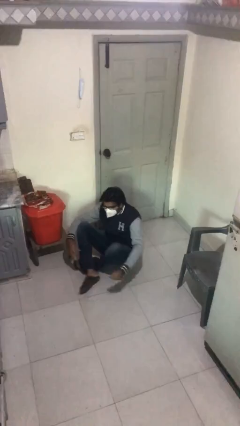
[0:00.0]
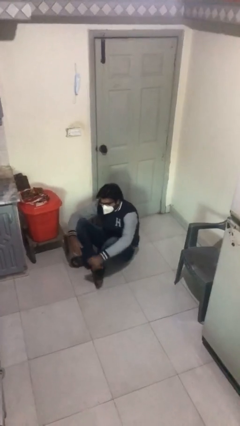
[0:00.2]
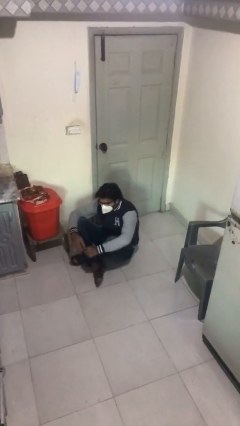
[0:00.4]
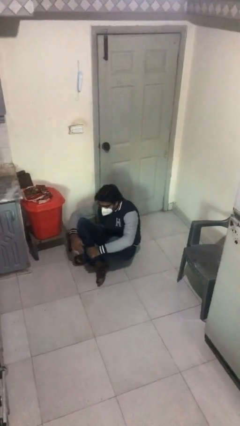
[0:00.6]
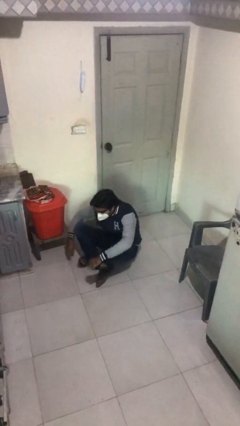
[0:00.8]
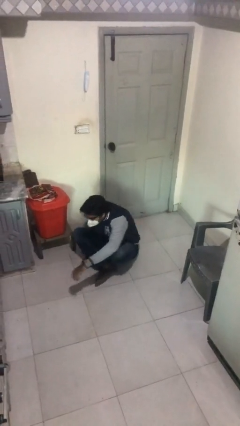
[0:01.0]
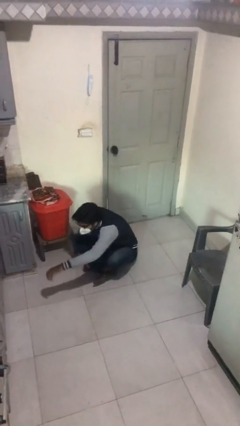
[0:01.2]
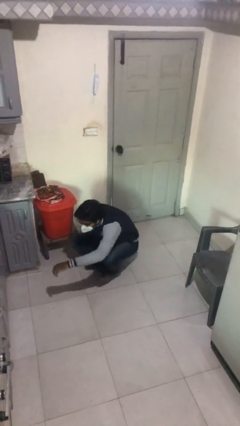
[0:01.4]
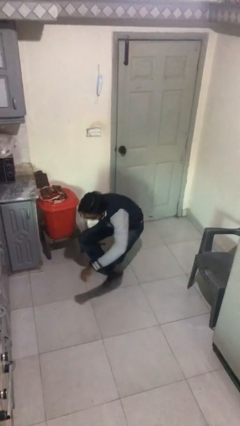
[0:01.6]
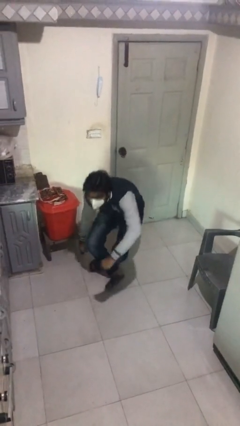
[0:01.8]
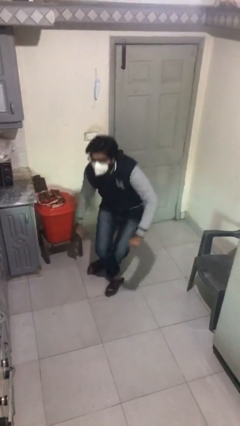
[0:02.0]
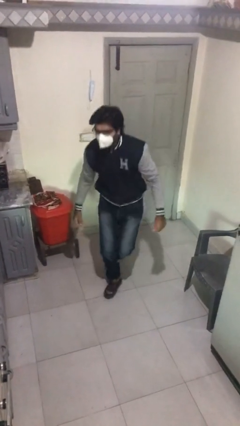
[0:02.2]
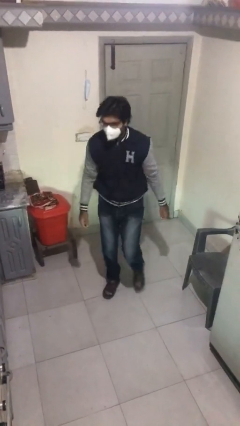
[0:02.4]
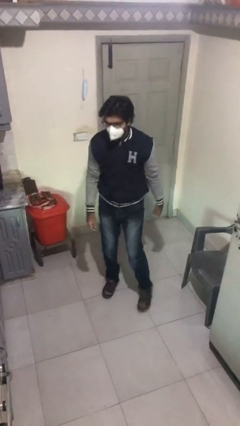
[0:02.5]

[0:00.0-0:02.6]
person stands up

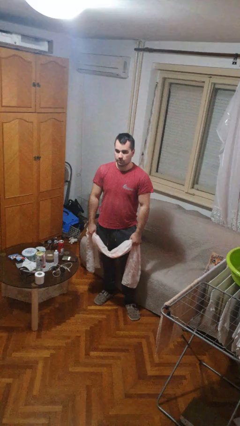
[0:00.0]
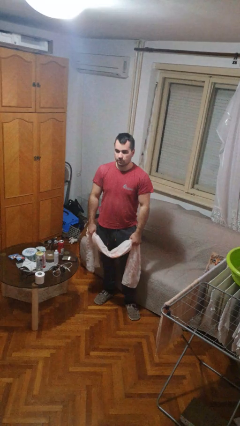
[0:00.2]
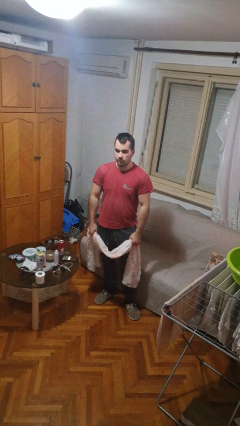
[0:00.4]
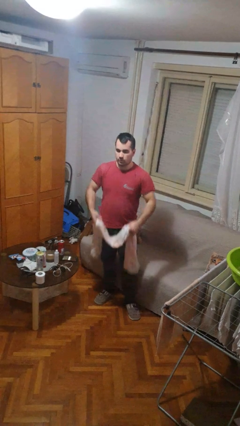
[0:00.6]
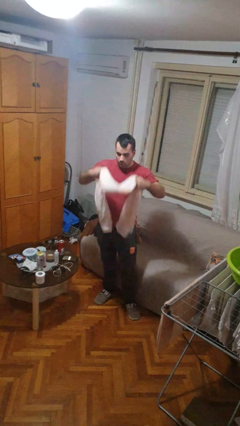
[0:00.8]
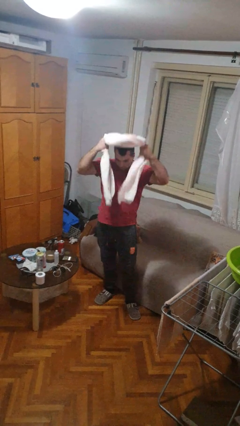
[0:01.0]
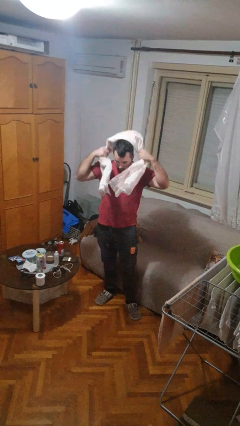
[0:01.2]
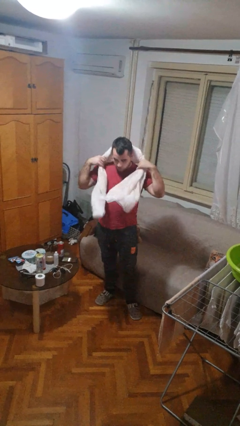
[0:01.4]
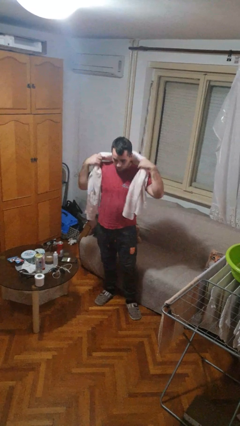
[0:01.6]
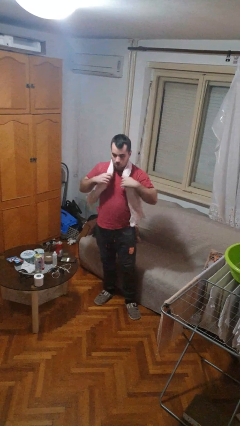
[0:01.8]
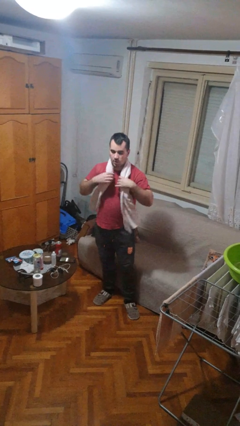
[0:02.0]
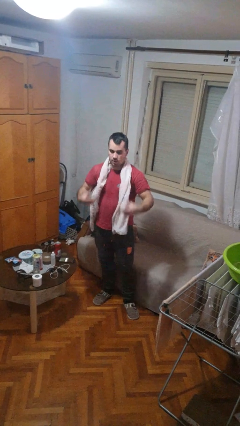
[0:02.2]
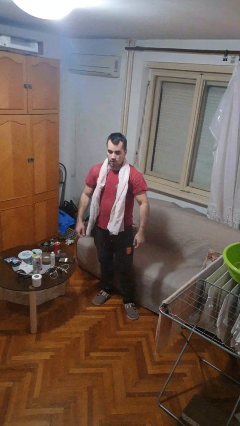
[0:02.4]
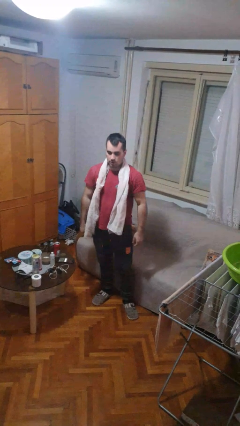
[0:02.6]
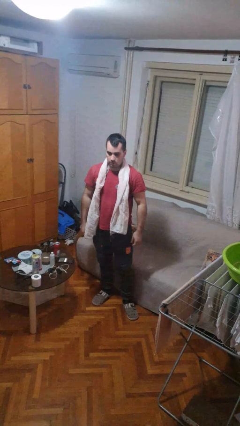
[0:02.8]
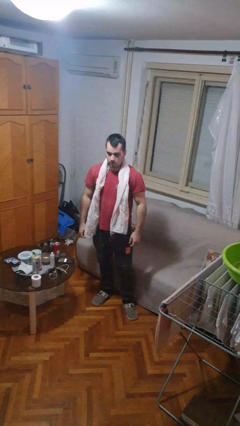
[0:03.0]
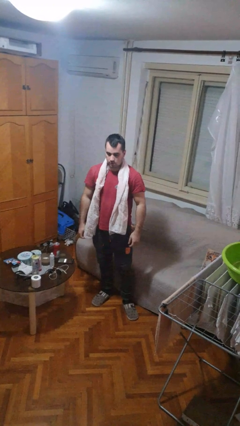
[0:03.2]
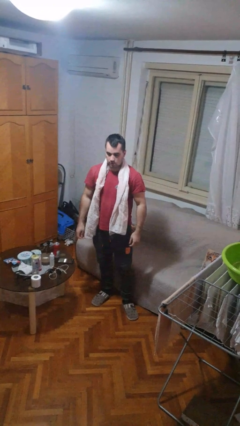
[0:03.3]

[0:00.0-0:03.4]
person puts on scarf

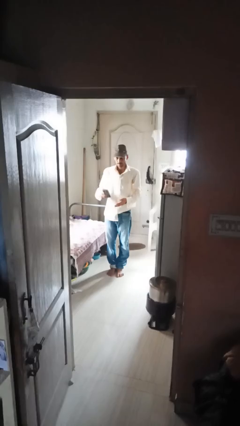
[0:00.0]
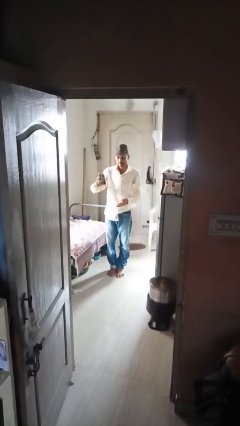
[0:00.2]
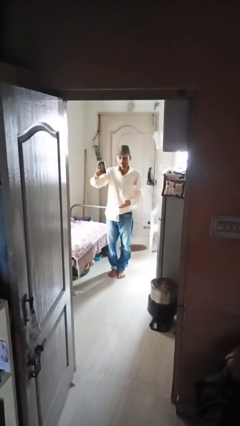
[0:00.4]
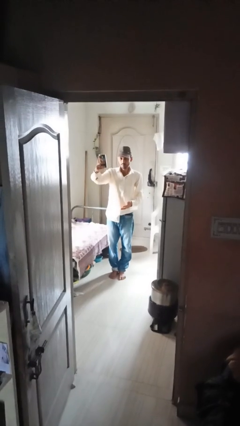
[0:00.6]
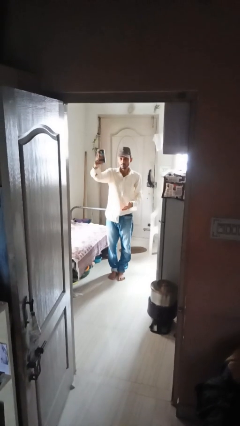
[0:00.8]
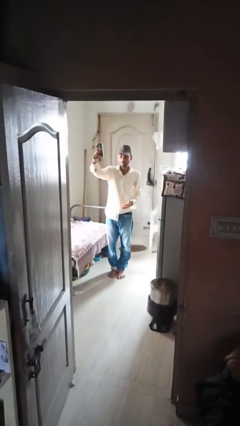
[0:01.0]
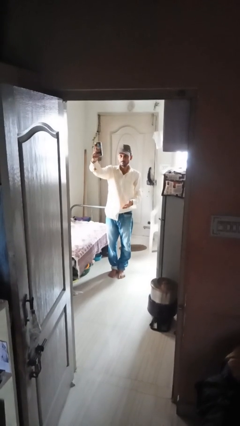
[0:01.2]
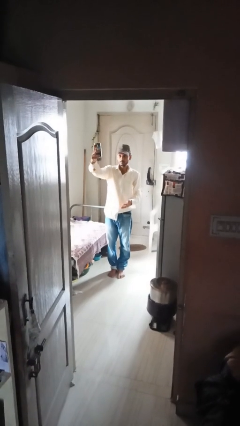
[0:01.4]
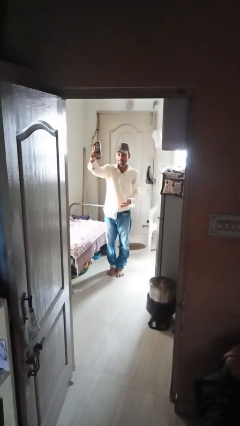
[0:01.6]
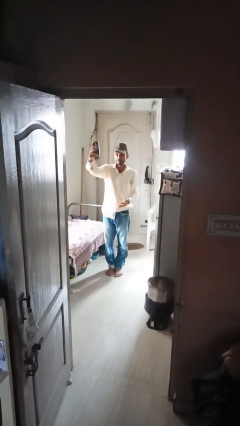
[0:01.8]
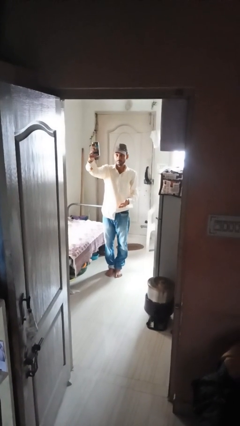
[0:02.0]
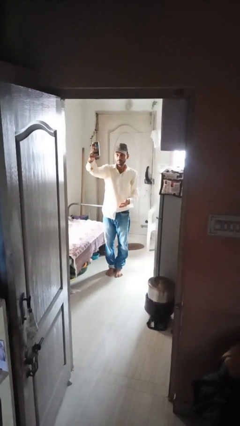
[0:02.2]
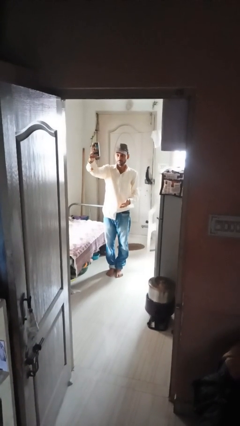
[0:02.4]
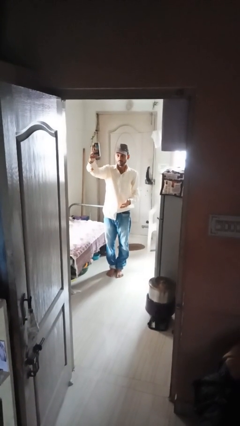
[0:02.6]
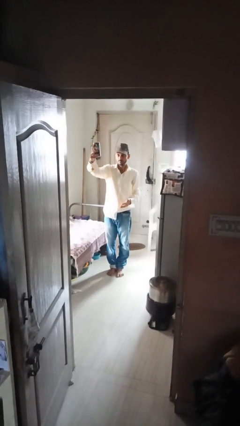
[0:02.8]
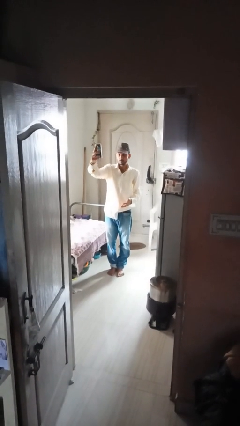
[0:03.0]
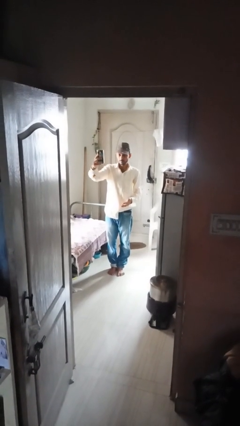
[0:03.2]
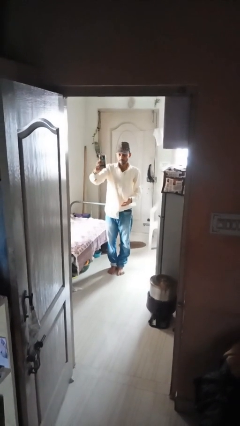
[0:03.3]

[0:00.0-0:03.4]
person takes selfie

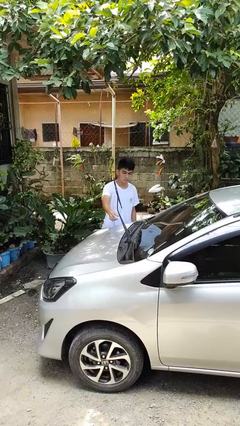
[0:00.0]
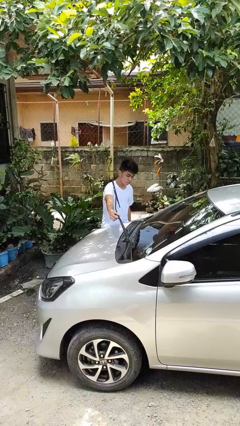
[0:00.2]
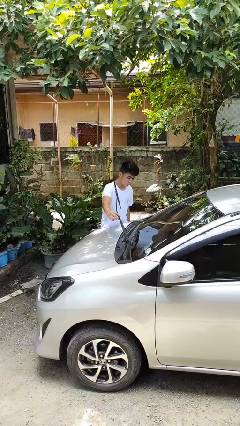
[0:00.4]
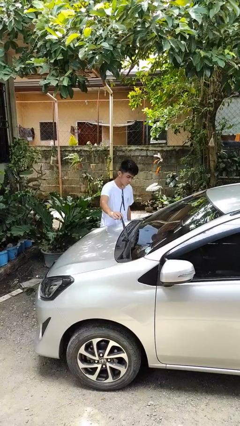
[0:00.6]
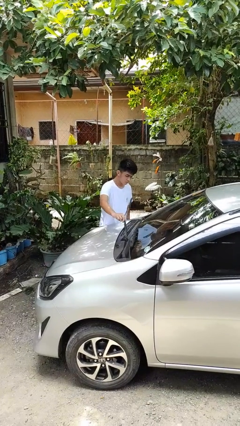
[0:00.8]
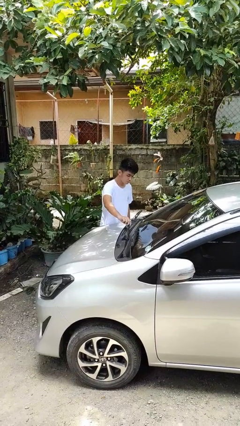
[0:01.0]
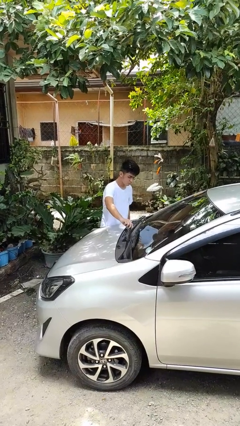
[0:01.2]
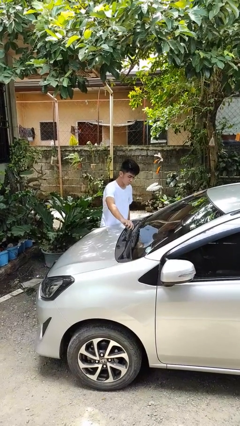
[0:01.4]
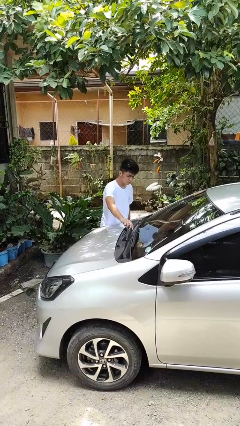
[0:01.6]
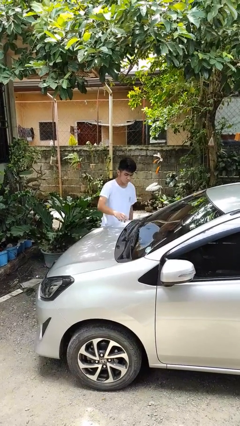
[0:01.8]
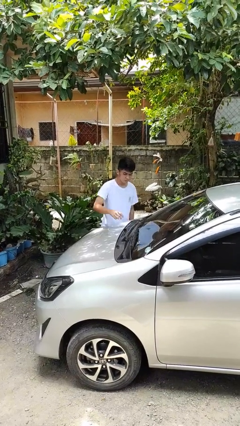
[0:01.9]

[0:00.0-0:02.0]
person flips down car wipers

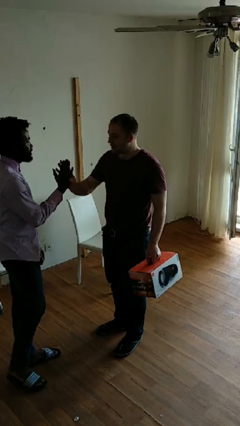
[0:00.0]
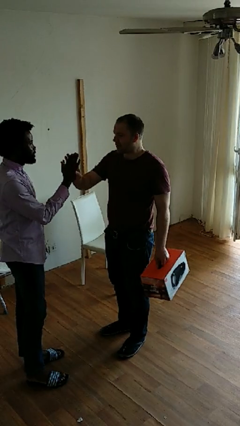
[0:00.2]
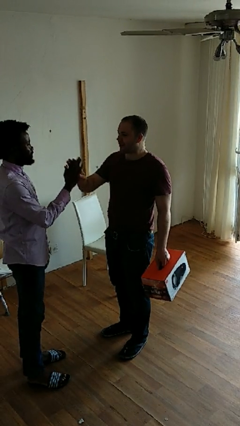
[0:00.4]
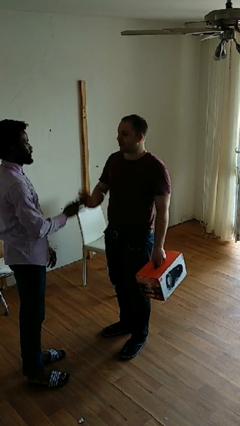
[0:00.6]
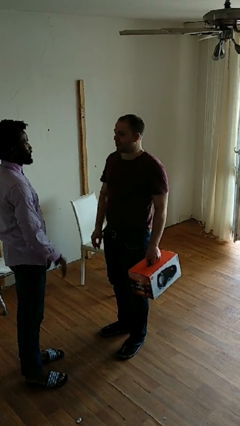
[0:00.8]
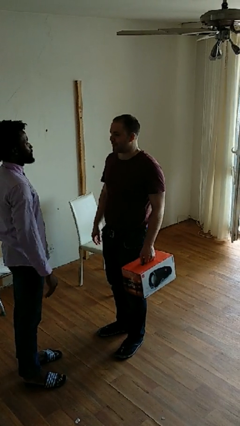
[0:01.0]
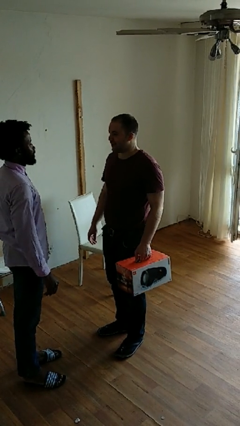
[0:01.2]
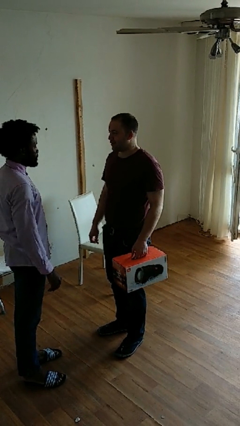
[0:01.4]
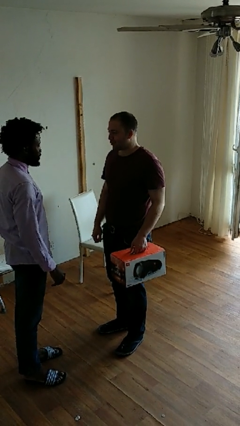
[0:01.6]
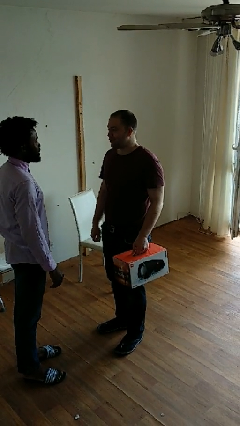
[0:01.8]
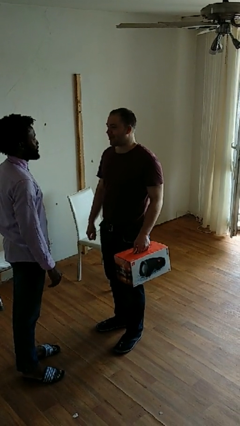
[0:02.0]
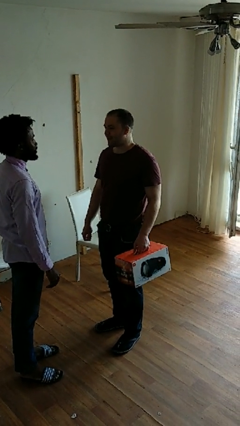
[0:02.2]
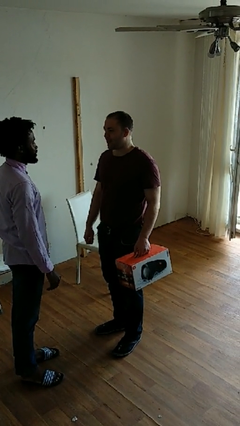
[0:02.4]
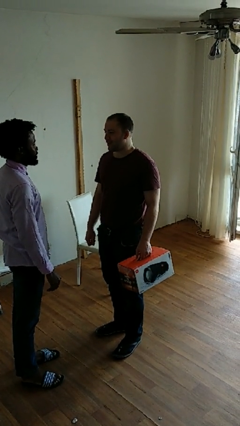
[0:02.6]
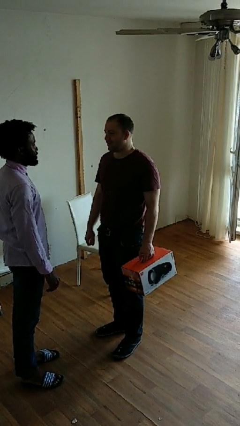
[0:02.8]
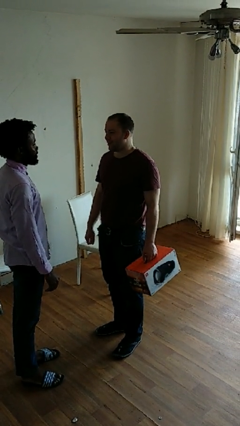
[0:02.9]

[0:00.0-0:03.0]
person highfives hand

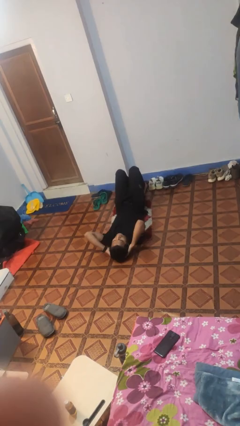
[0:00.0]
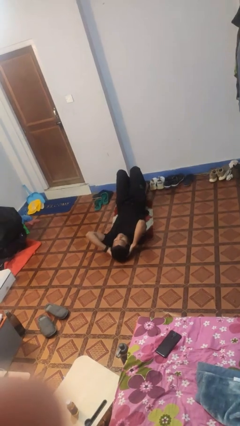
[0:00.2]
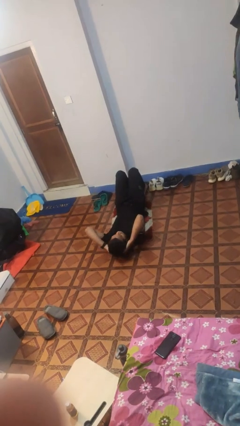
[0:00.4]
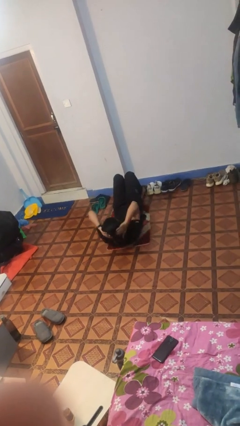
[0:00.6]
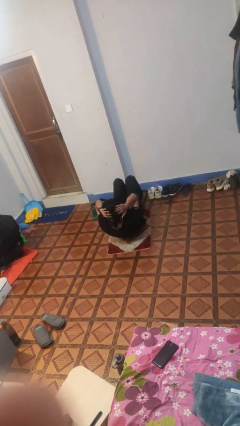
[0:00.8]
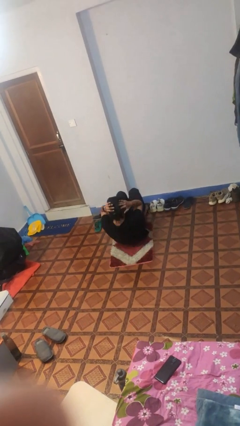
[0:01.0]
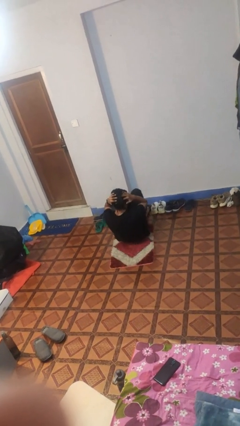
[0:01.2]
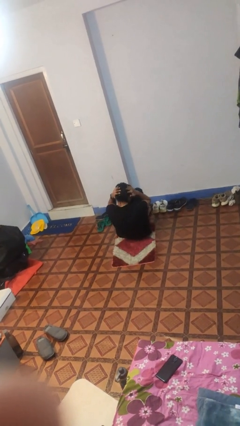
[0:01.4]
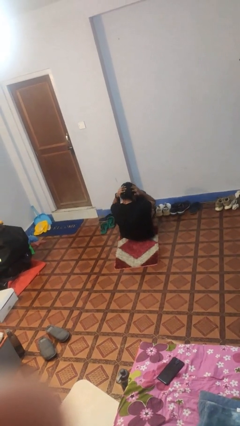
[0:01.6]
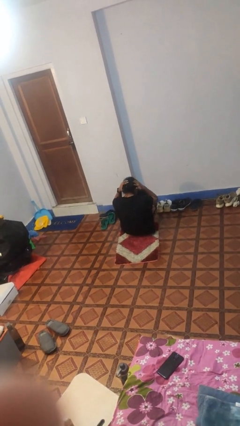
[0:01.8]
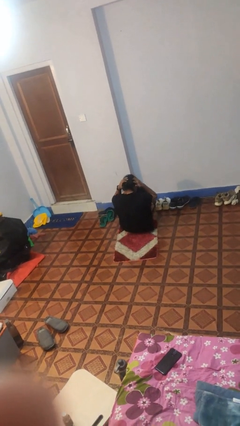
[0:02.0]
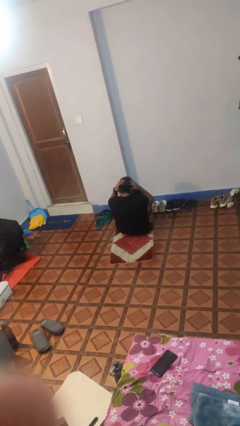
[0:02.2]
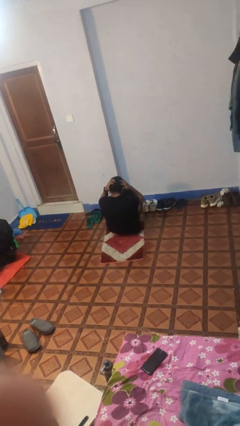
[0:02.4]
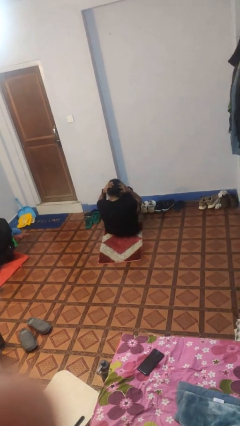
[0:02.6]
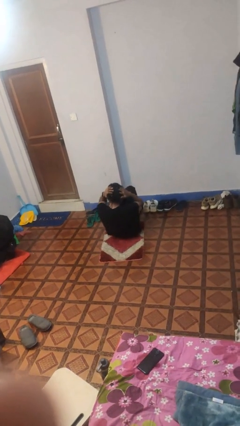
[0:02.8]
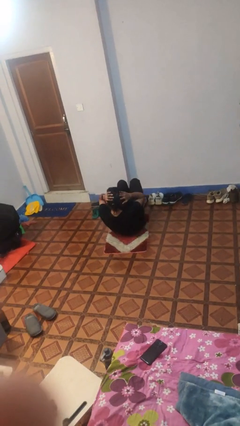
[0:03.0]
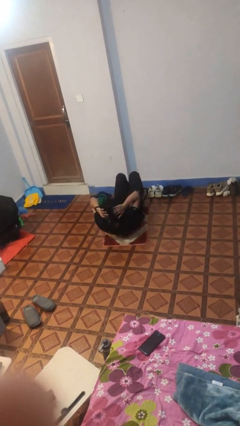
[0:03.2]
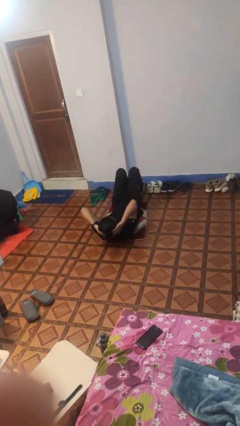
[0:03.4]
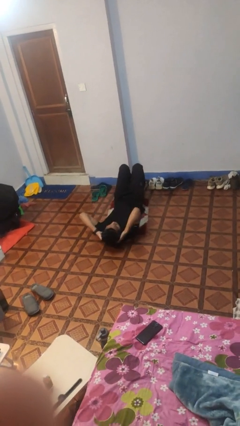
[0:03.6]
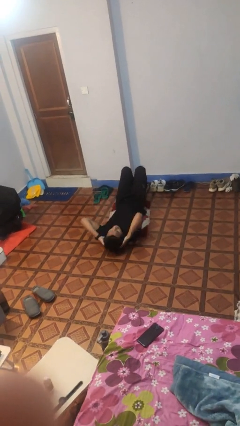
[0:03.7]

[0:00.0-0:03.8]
person exercises with situp
